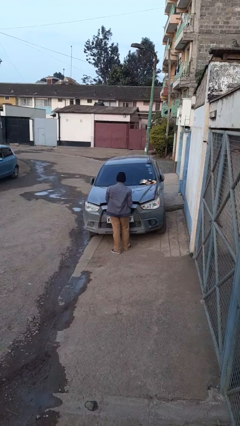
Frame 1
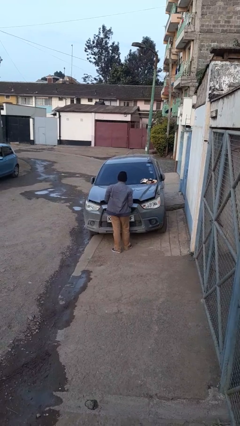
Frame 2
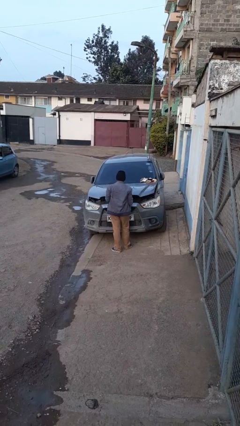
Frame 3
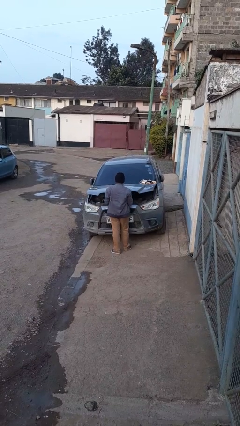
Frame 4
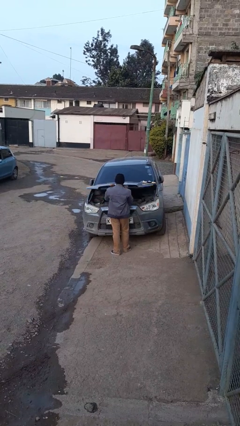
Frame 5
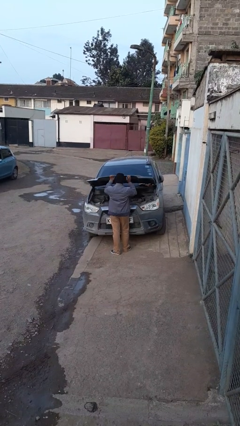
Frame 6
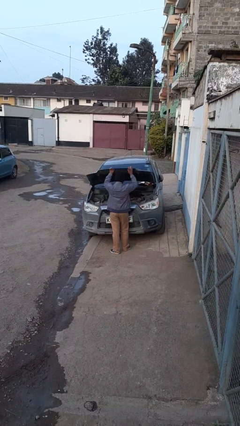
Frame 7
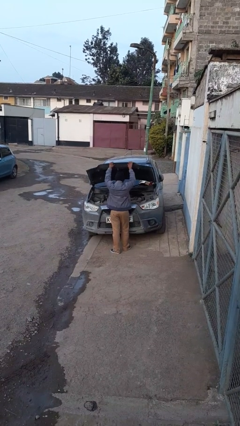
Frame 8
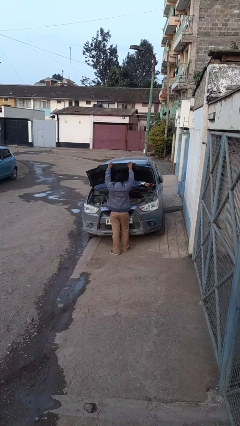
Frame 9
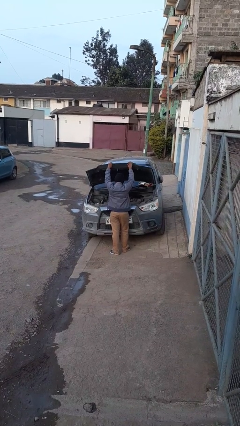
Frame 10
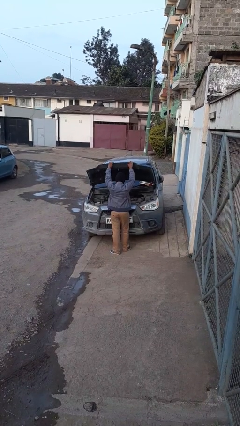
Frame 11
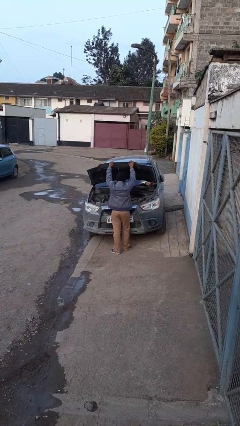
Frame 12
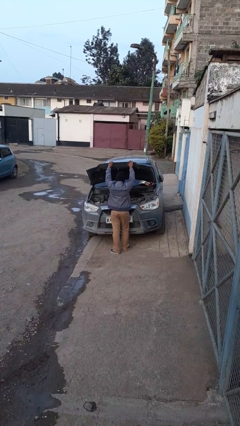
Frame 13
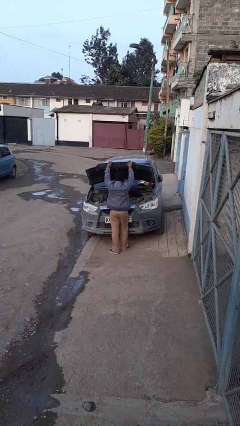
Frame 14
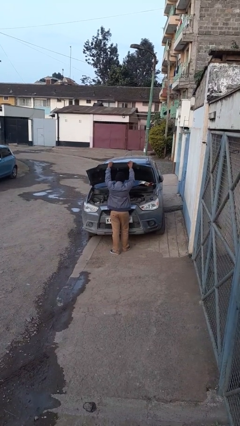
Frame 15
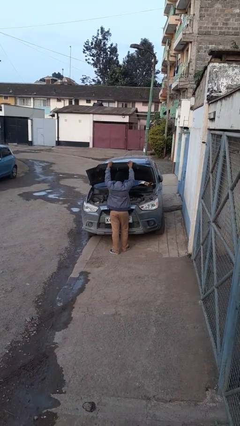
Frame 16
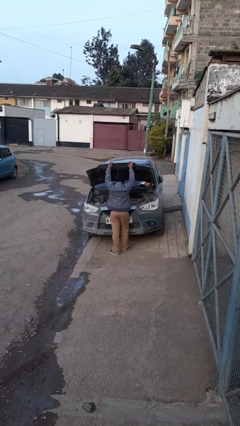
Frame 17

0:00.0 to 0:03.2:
person opens car hood

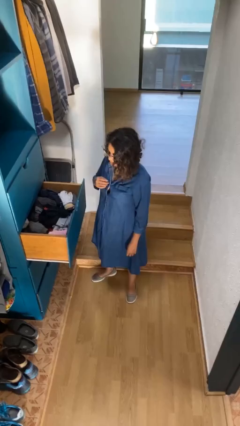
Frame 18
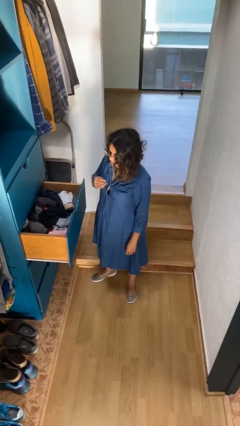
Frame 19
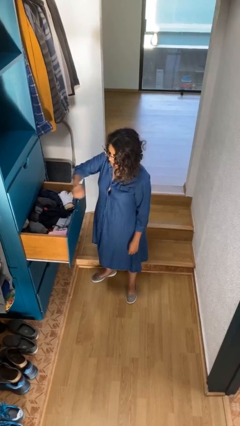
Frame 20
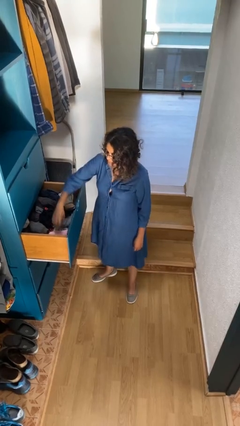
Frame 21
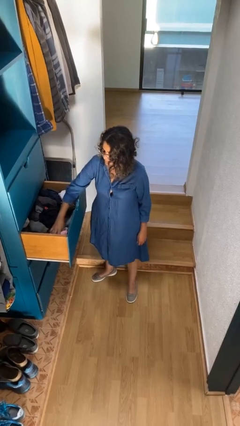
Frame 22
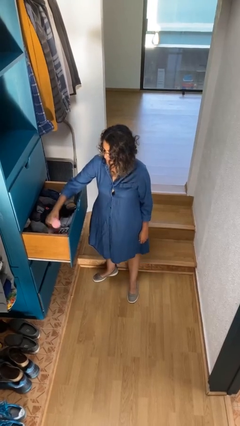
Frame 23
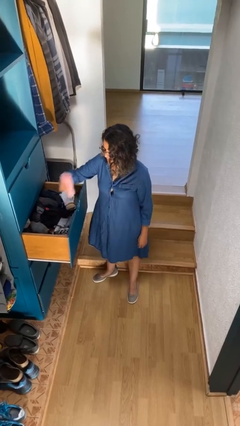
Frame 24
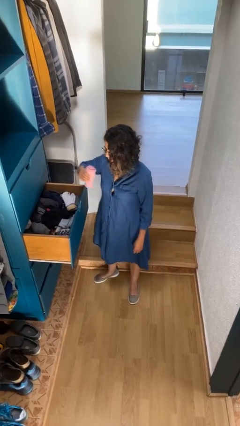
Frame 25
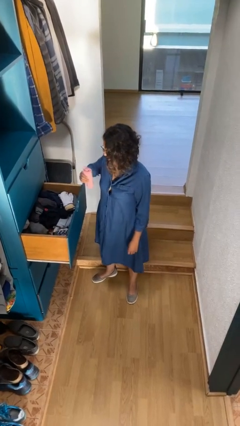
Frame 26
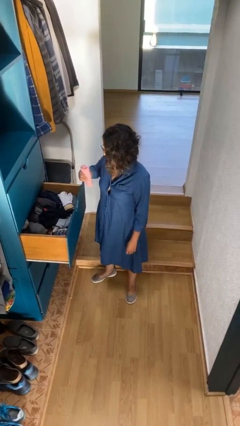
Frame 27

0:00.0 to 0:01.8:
person takes clothes from dresser

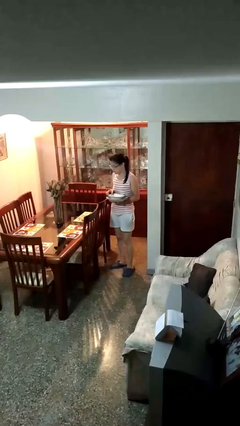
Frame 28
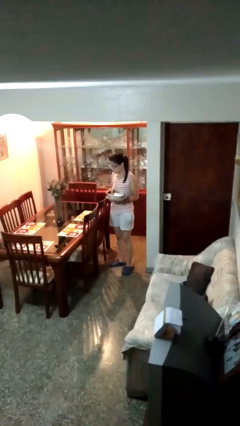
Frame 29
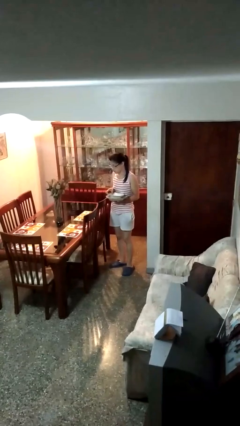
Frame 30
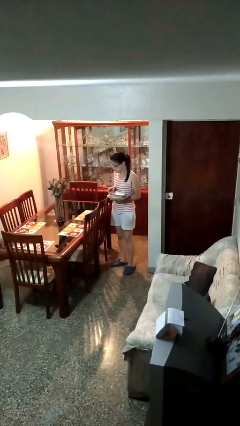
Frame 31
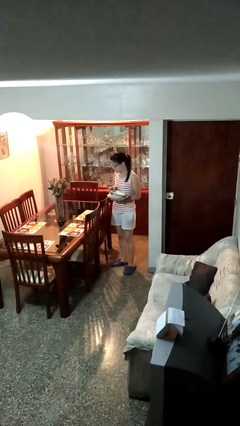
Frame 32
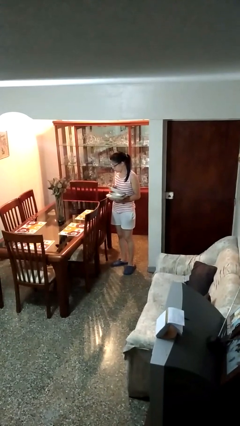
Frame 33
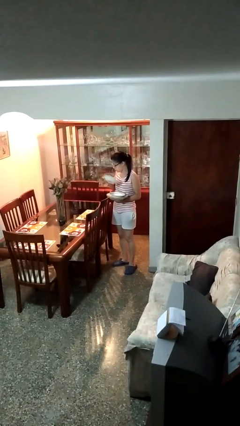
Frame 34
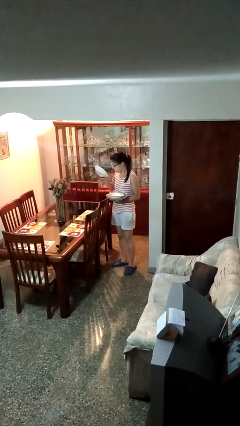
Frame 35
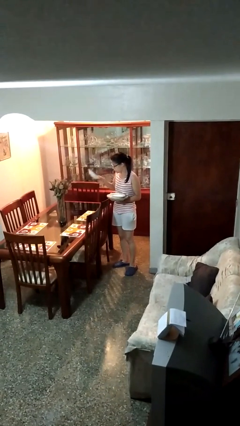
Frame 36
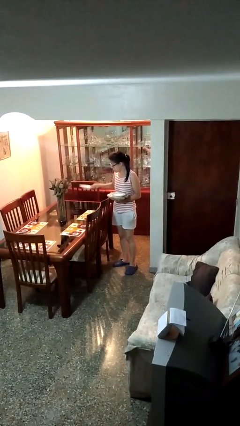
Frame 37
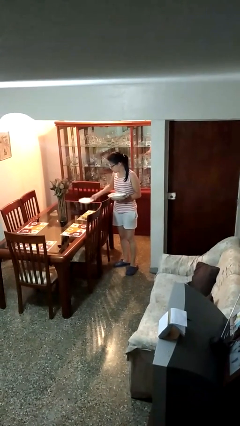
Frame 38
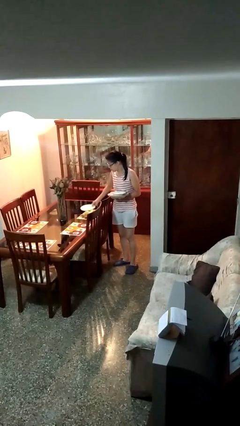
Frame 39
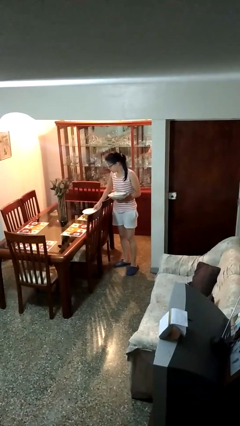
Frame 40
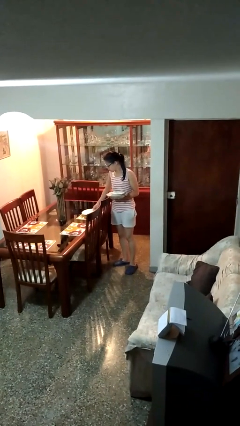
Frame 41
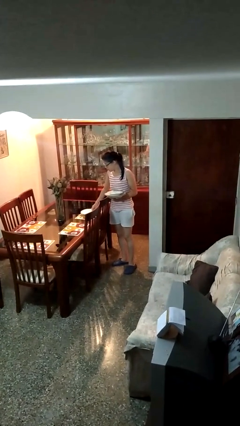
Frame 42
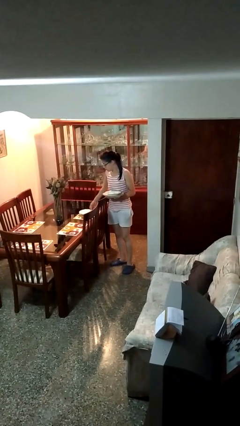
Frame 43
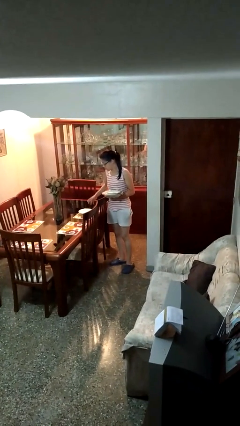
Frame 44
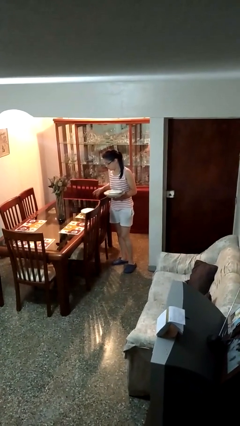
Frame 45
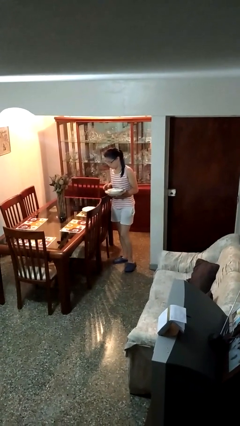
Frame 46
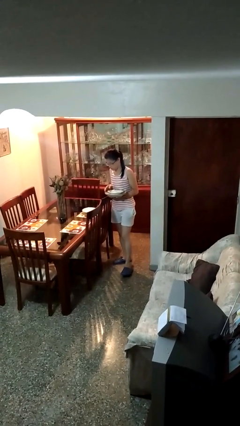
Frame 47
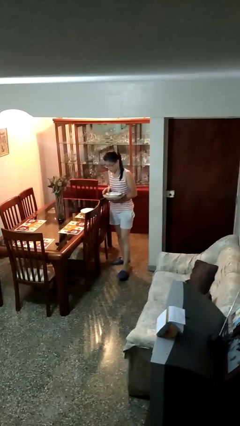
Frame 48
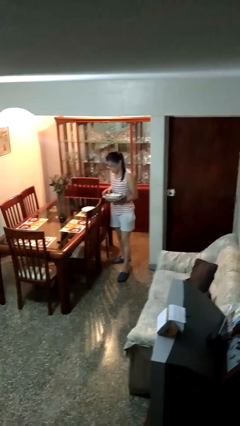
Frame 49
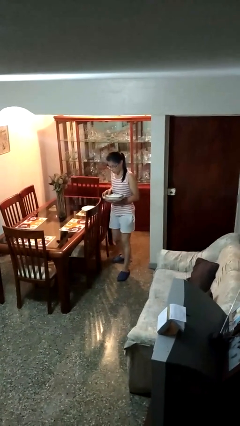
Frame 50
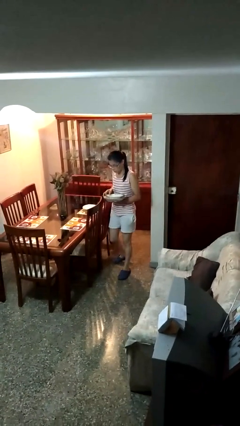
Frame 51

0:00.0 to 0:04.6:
person sets table

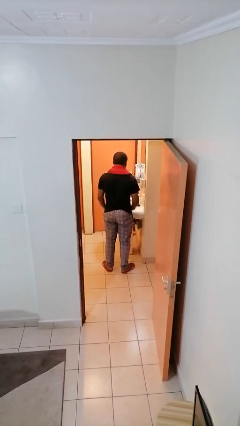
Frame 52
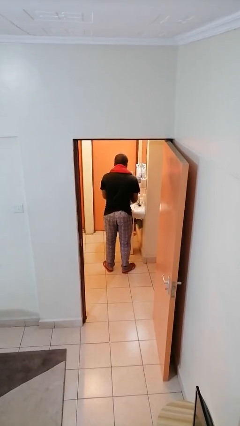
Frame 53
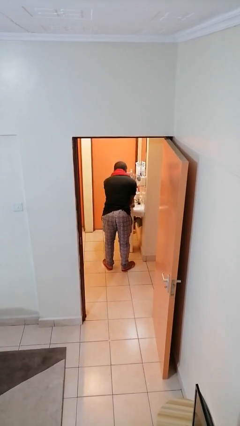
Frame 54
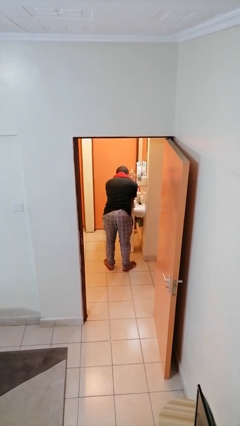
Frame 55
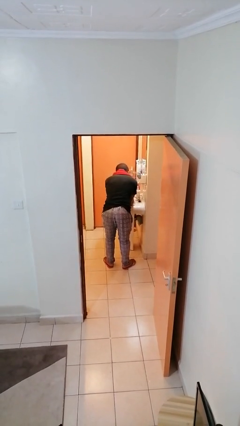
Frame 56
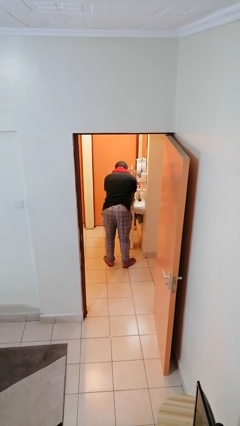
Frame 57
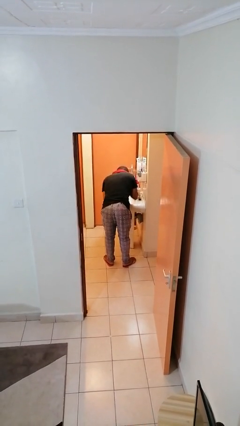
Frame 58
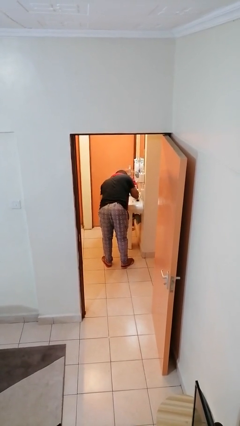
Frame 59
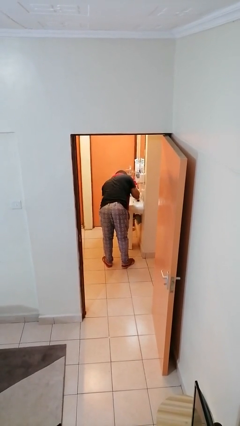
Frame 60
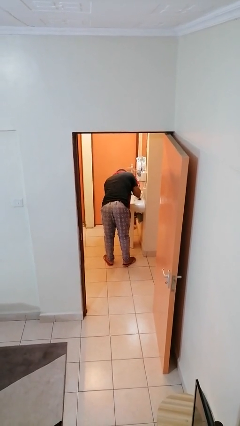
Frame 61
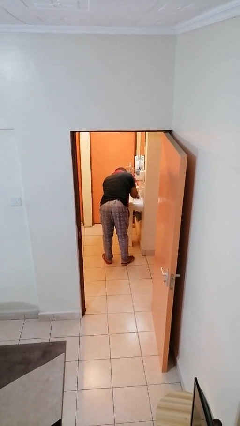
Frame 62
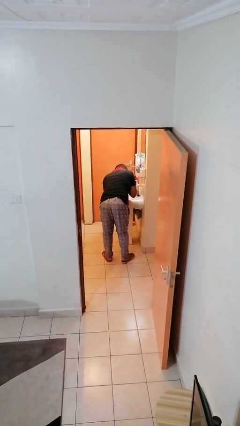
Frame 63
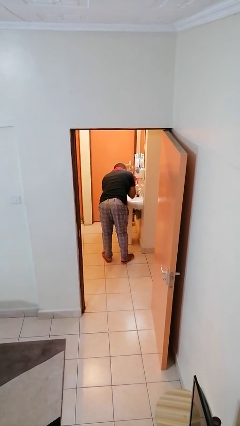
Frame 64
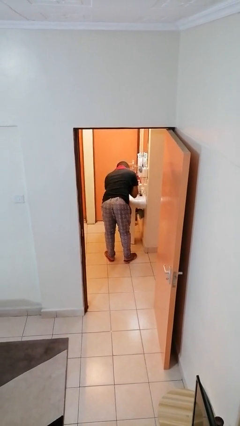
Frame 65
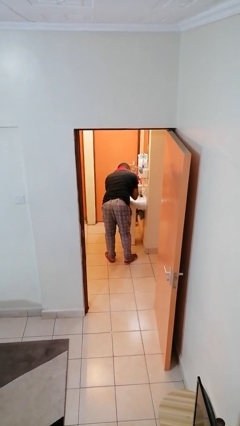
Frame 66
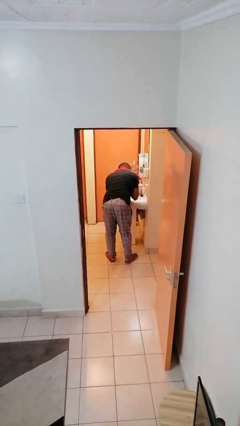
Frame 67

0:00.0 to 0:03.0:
person washes face

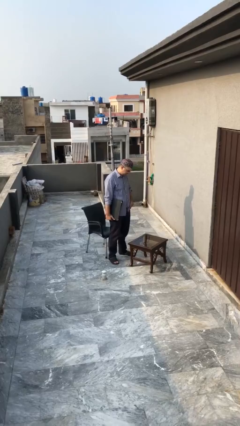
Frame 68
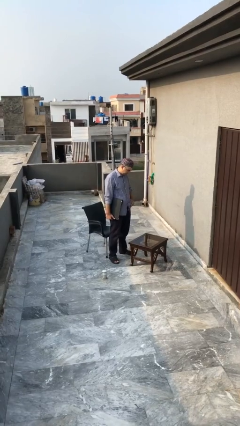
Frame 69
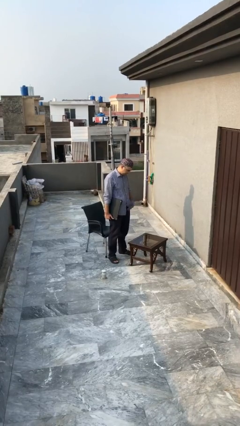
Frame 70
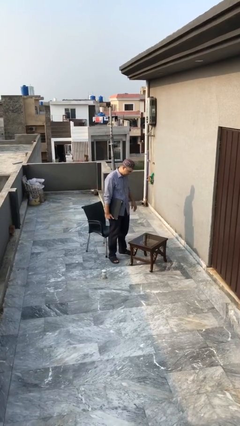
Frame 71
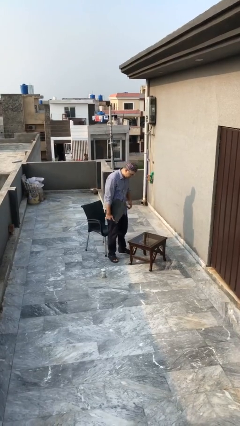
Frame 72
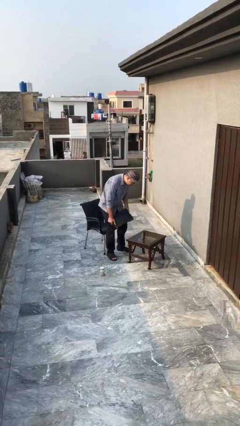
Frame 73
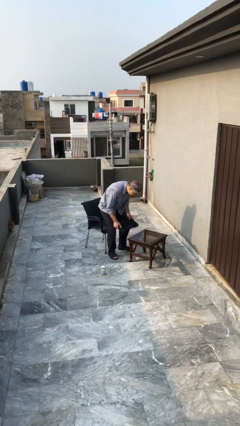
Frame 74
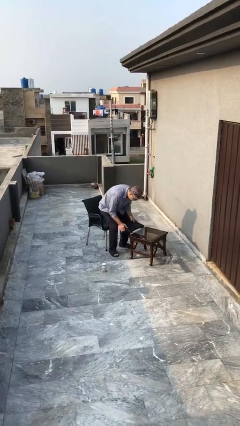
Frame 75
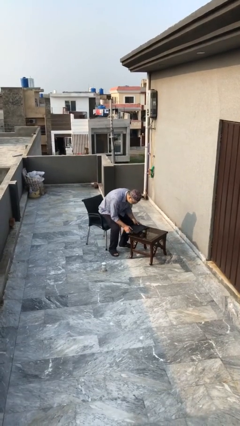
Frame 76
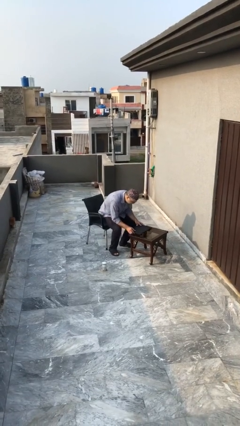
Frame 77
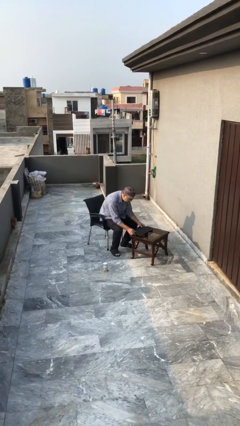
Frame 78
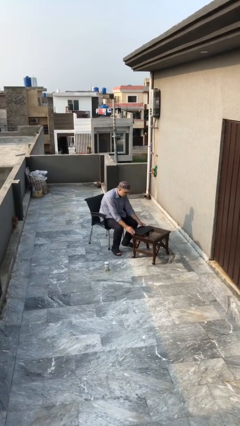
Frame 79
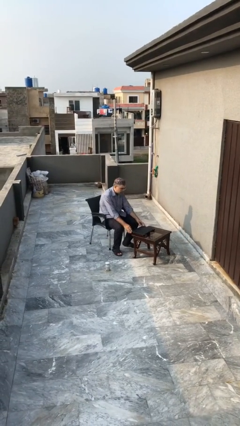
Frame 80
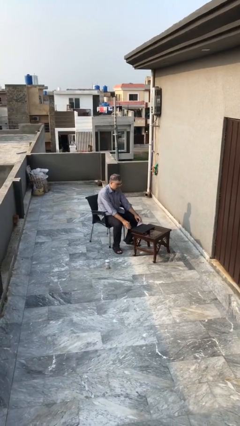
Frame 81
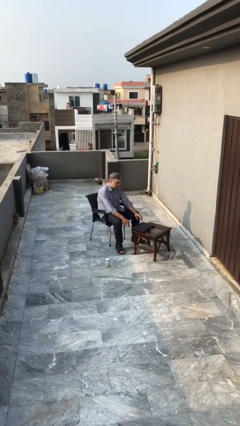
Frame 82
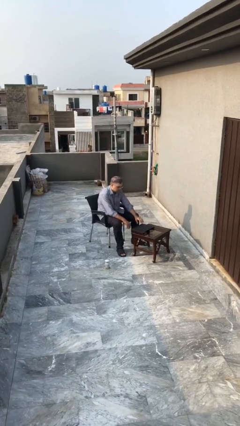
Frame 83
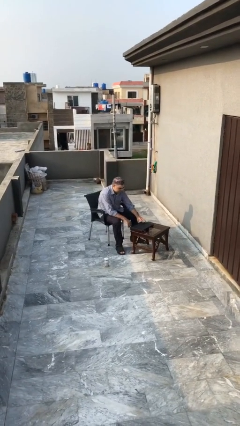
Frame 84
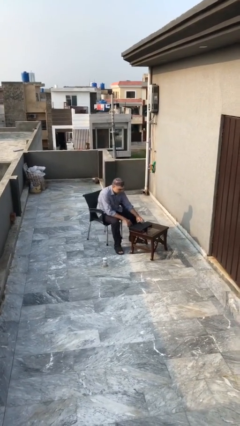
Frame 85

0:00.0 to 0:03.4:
person sits down

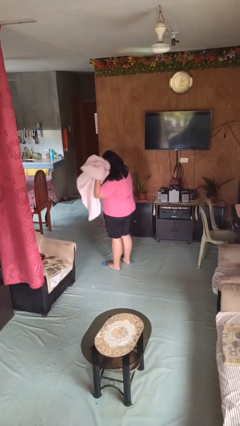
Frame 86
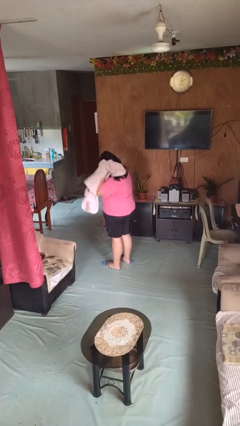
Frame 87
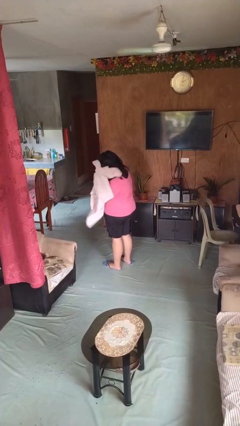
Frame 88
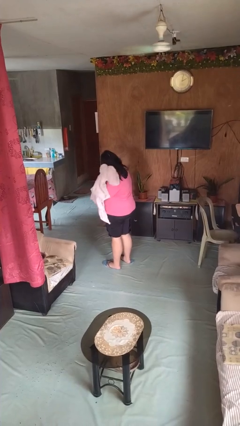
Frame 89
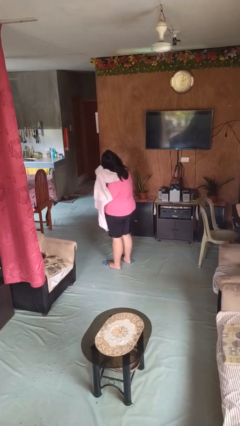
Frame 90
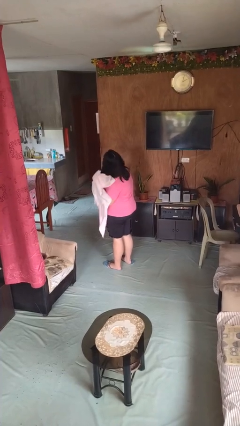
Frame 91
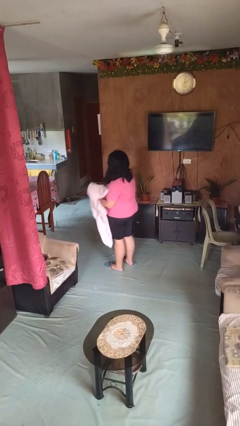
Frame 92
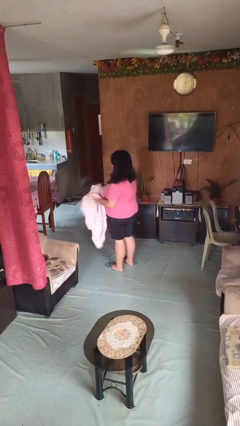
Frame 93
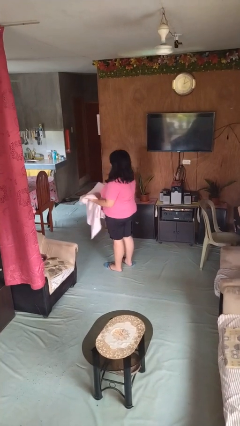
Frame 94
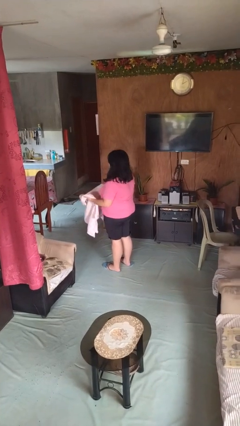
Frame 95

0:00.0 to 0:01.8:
person dries hair with towel
